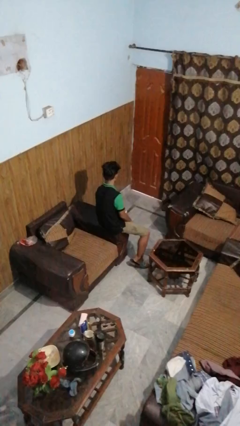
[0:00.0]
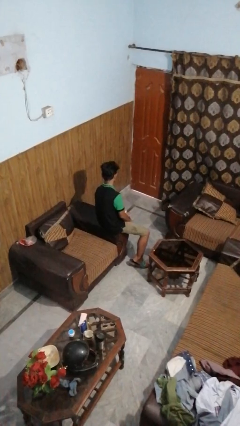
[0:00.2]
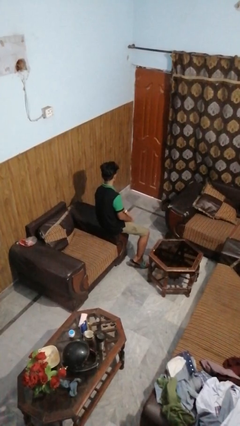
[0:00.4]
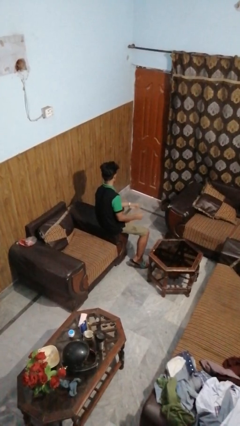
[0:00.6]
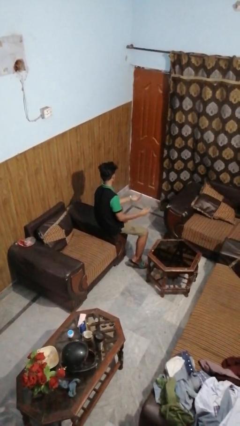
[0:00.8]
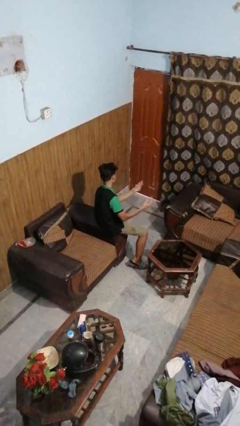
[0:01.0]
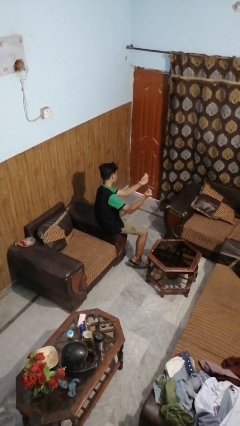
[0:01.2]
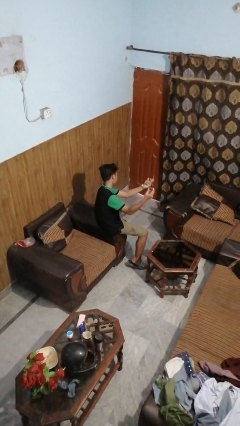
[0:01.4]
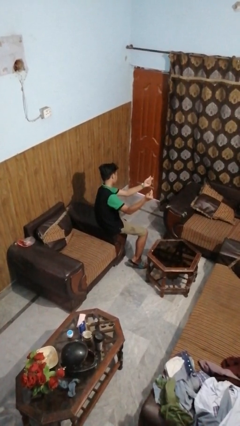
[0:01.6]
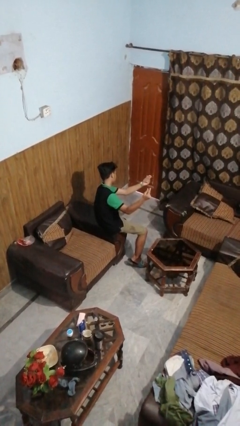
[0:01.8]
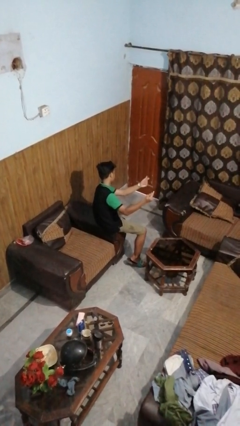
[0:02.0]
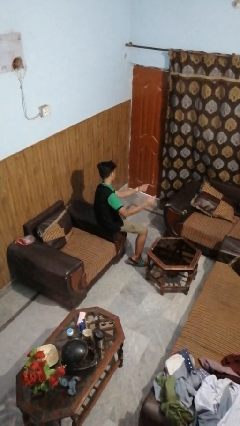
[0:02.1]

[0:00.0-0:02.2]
person snaps fingers

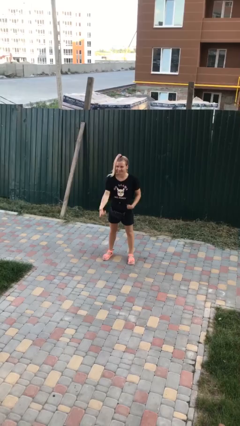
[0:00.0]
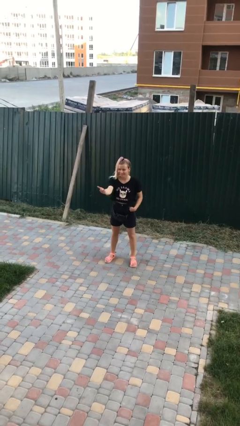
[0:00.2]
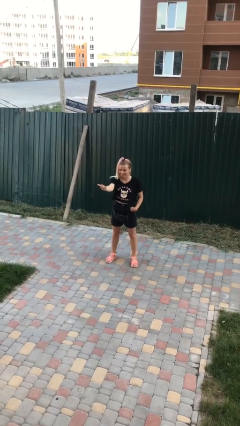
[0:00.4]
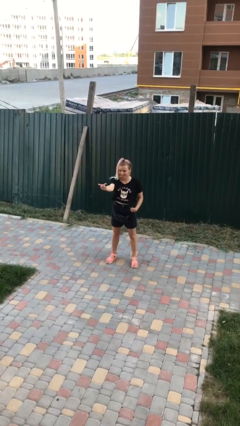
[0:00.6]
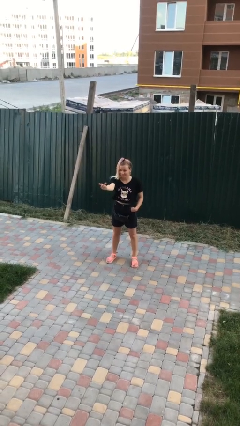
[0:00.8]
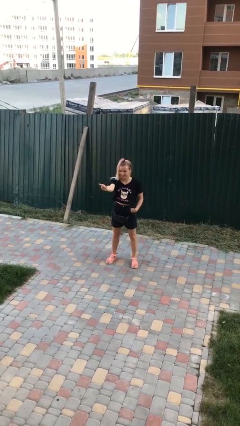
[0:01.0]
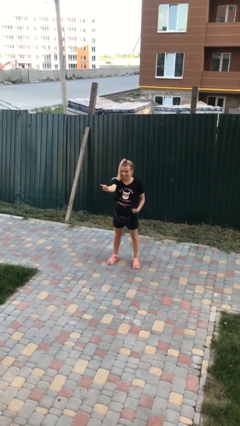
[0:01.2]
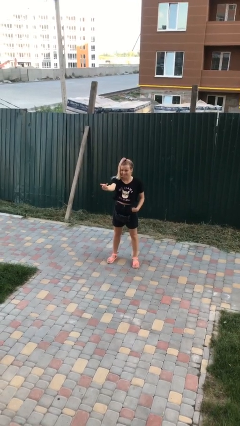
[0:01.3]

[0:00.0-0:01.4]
person gestures come here

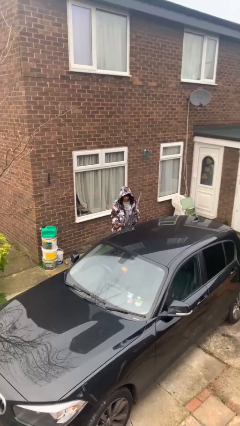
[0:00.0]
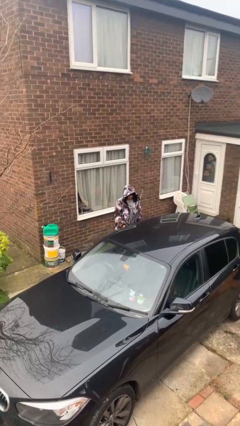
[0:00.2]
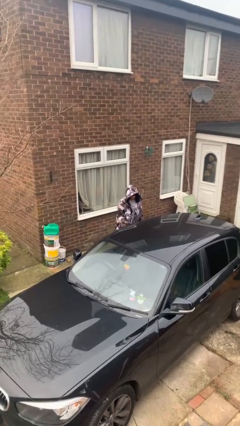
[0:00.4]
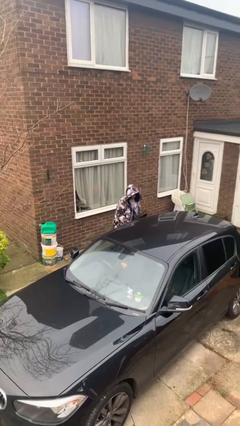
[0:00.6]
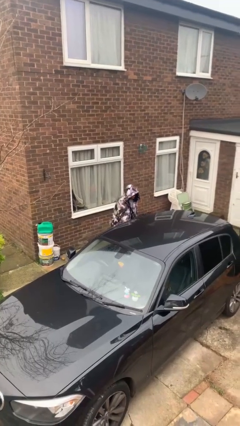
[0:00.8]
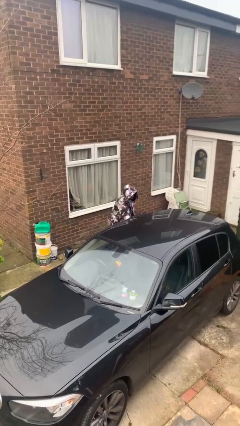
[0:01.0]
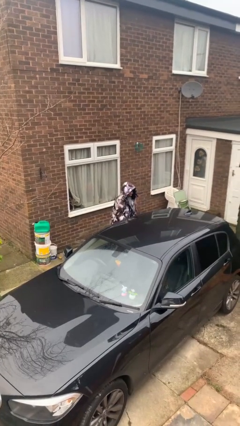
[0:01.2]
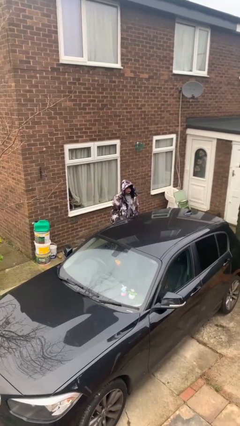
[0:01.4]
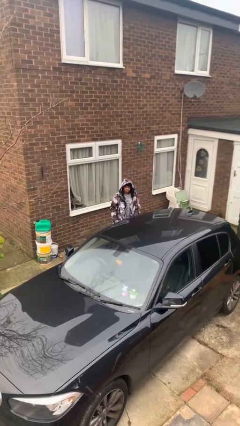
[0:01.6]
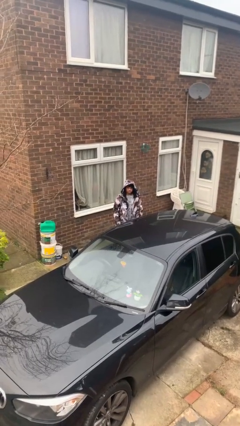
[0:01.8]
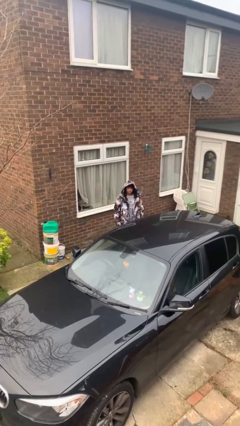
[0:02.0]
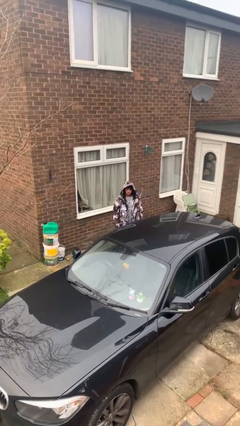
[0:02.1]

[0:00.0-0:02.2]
person closes car door

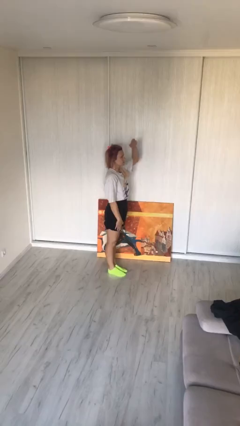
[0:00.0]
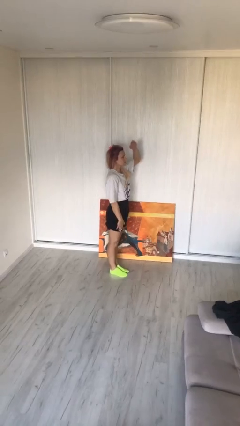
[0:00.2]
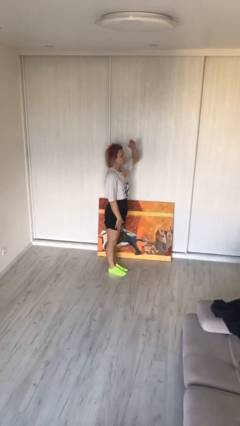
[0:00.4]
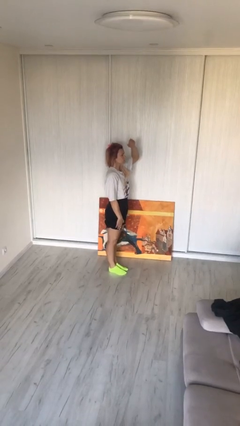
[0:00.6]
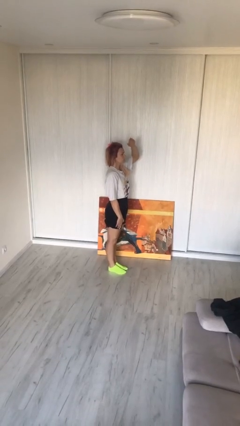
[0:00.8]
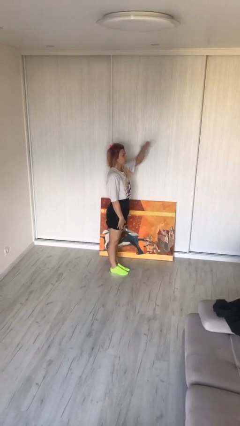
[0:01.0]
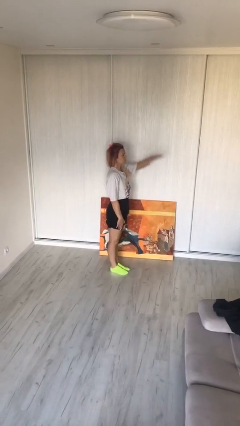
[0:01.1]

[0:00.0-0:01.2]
person salutes

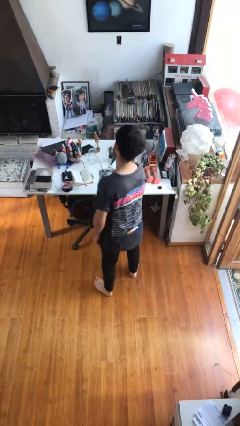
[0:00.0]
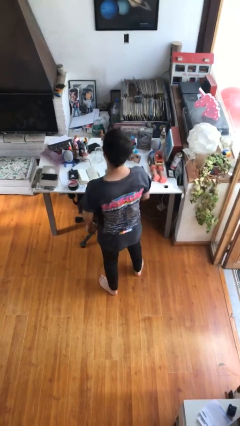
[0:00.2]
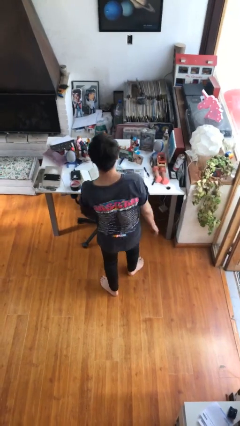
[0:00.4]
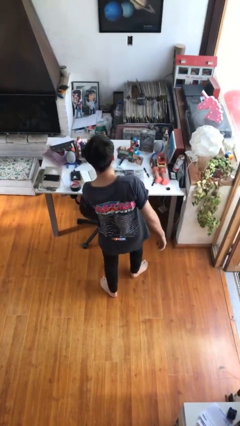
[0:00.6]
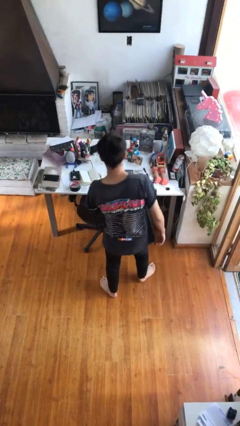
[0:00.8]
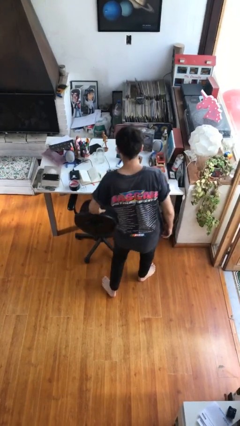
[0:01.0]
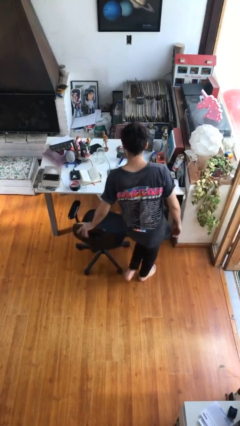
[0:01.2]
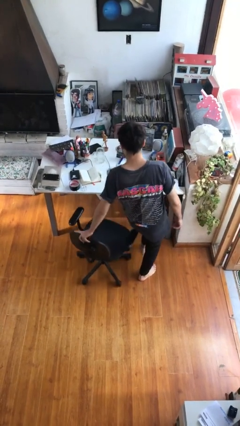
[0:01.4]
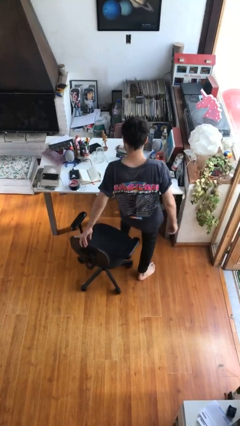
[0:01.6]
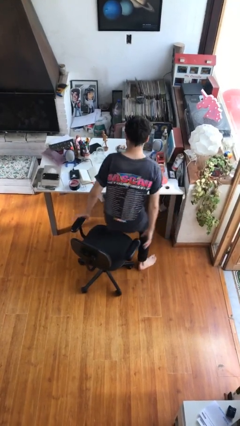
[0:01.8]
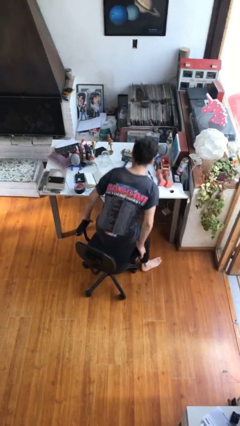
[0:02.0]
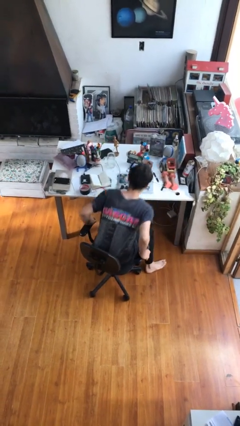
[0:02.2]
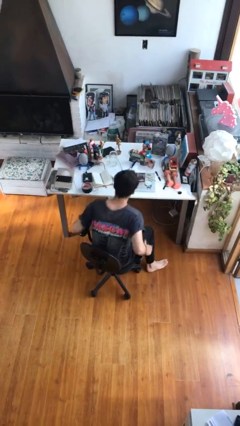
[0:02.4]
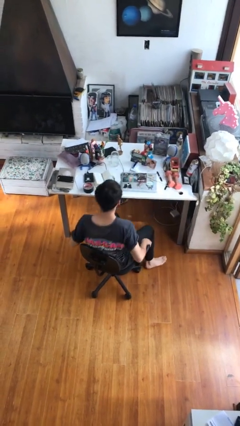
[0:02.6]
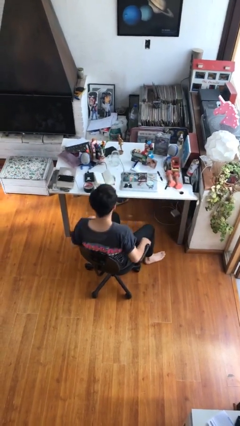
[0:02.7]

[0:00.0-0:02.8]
person sits down

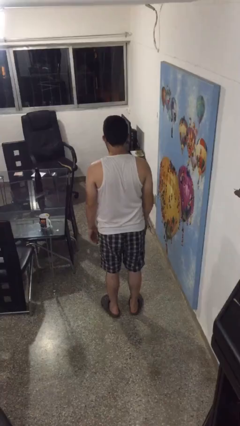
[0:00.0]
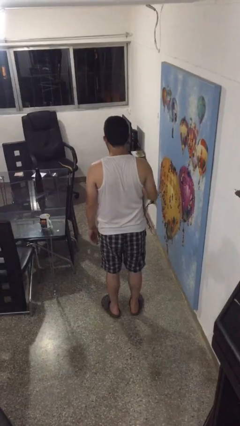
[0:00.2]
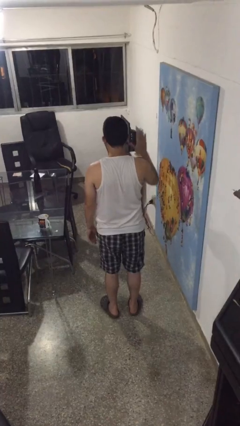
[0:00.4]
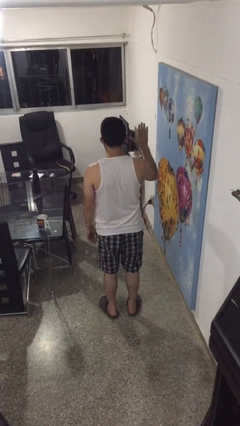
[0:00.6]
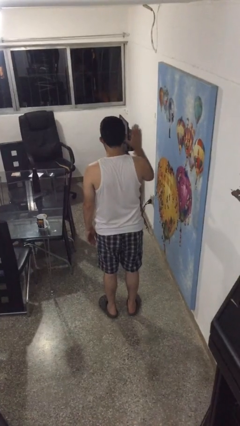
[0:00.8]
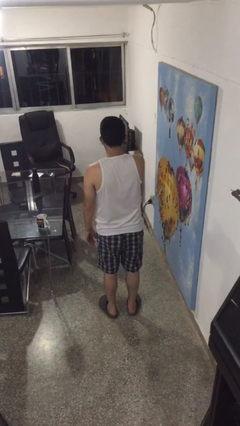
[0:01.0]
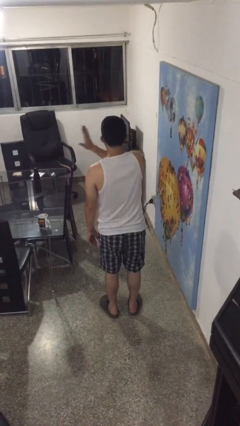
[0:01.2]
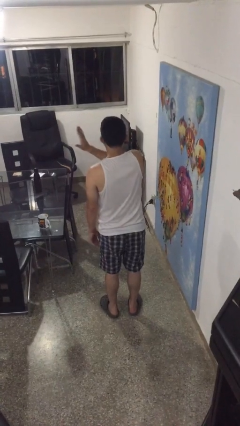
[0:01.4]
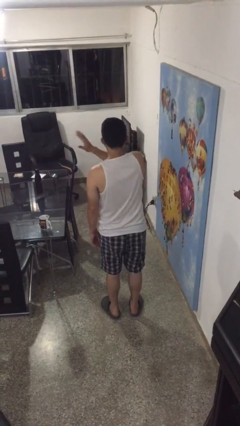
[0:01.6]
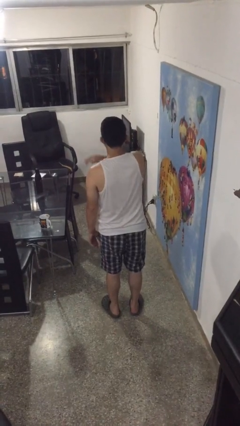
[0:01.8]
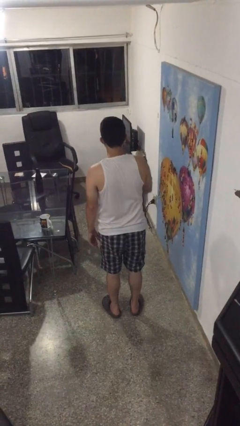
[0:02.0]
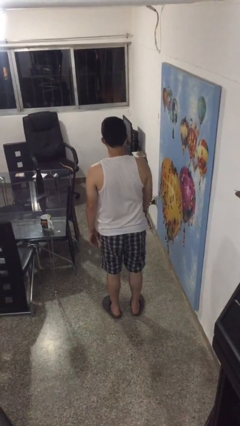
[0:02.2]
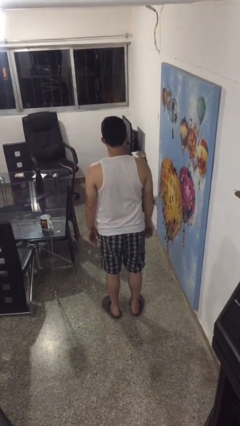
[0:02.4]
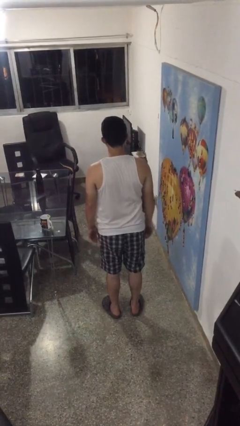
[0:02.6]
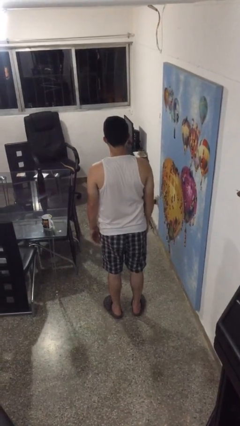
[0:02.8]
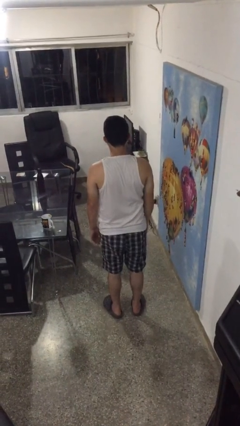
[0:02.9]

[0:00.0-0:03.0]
person gestures swipe left

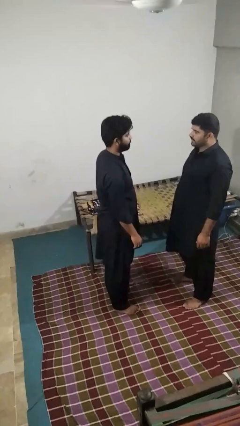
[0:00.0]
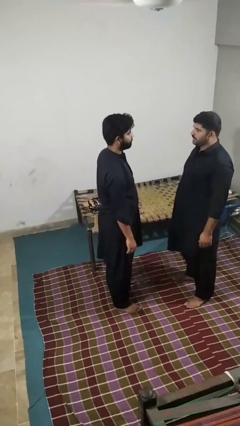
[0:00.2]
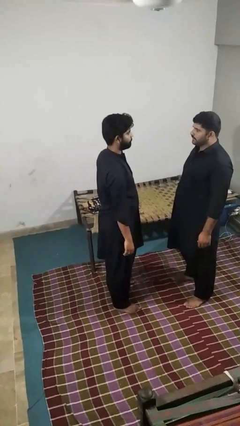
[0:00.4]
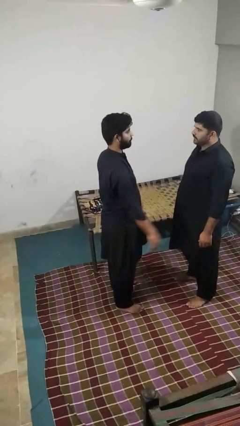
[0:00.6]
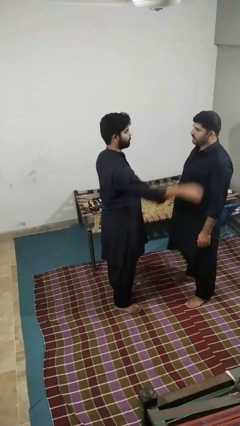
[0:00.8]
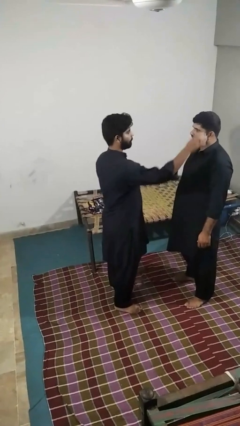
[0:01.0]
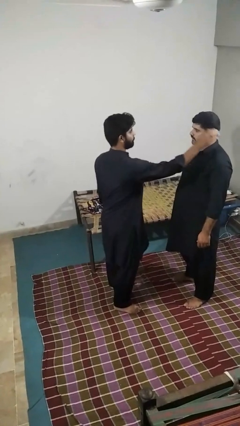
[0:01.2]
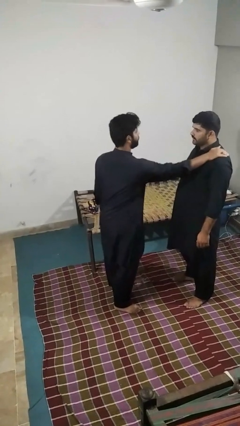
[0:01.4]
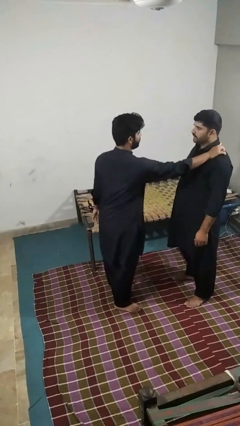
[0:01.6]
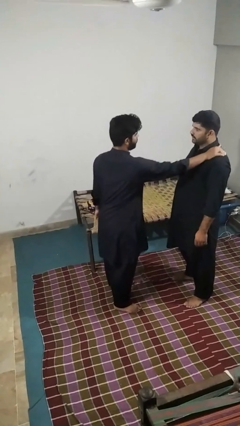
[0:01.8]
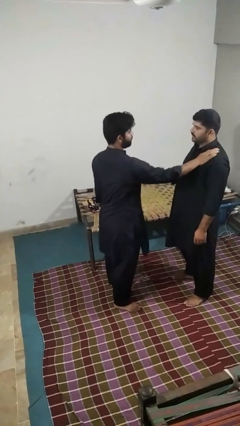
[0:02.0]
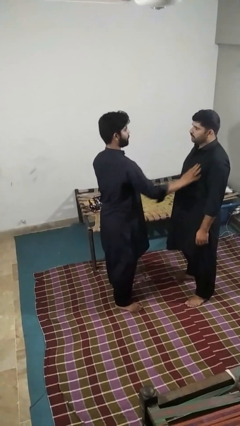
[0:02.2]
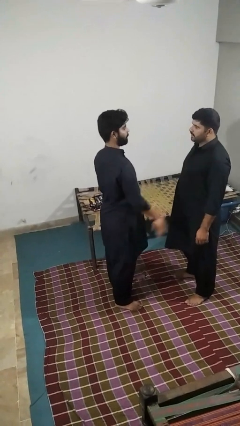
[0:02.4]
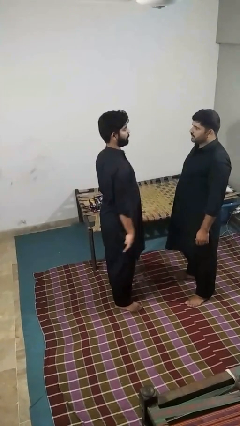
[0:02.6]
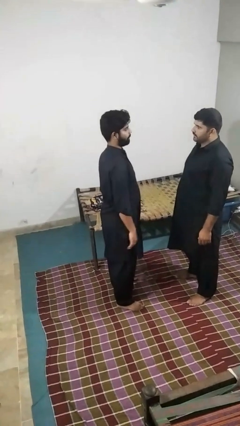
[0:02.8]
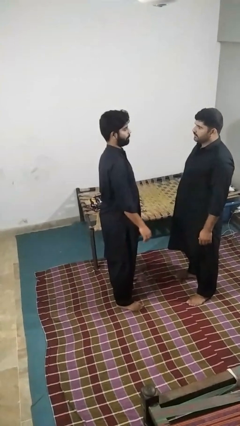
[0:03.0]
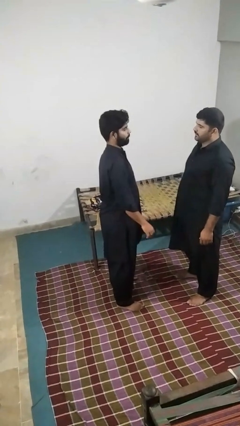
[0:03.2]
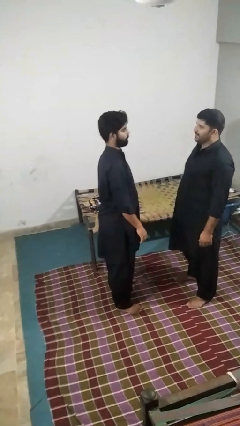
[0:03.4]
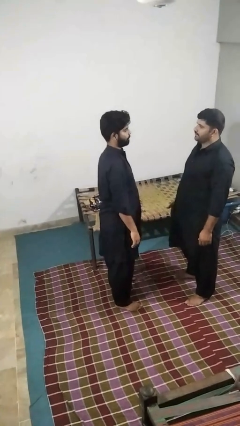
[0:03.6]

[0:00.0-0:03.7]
person pounds shoulders of person

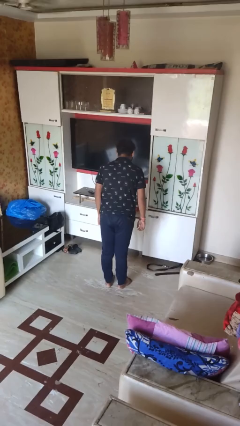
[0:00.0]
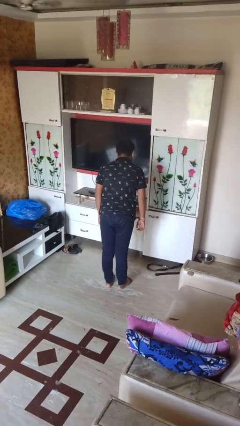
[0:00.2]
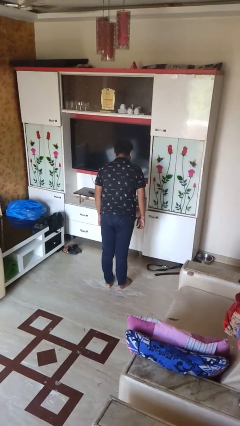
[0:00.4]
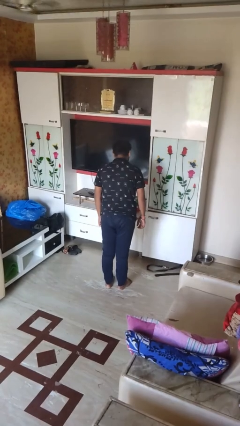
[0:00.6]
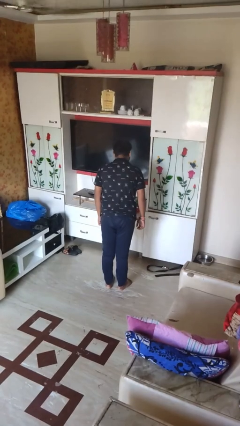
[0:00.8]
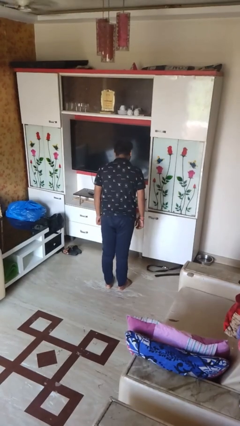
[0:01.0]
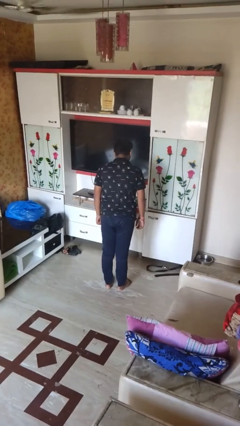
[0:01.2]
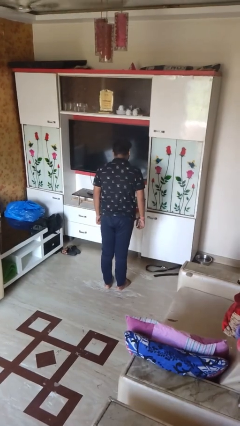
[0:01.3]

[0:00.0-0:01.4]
person wiggles hips
